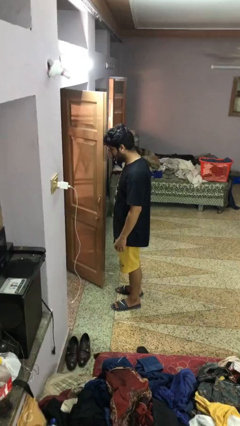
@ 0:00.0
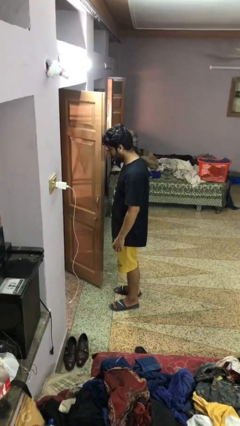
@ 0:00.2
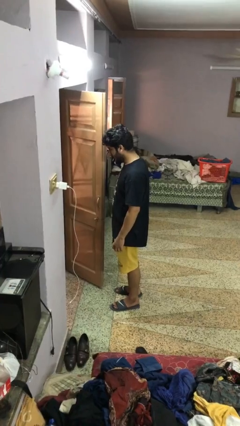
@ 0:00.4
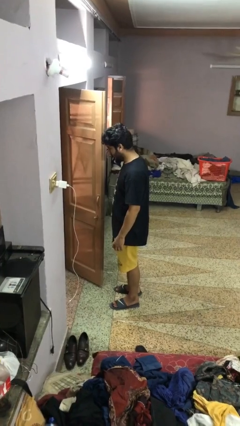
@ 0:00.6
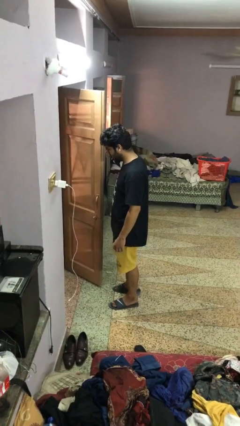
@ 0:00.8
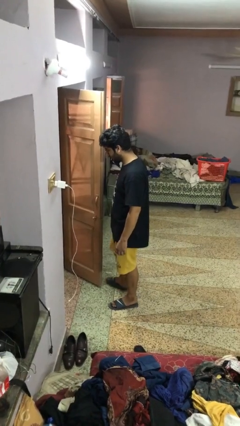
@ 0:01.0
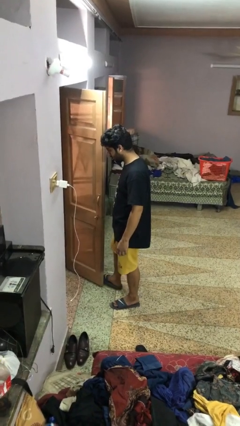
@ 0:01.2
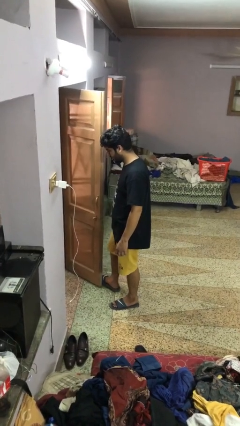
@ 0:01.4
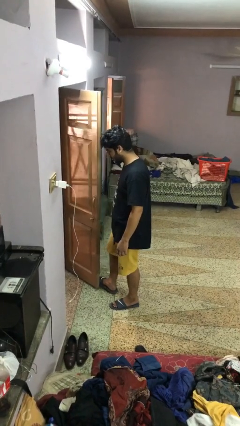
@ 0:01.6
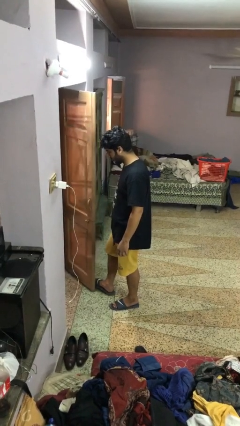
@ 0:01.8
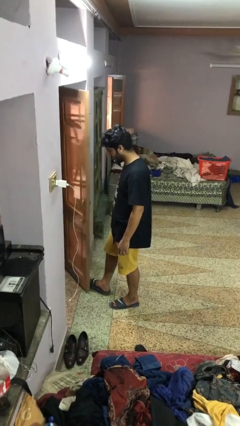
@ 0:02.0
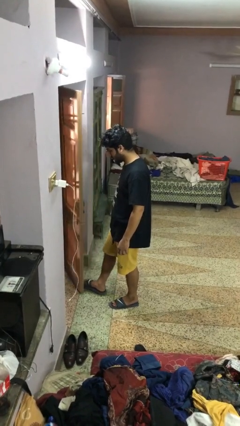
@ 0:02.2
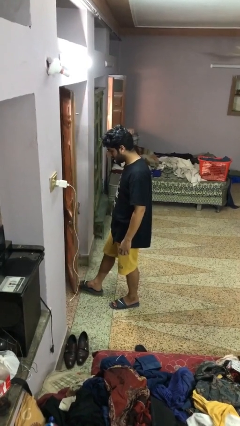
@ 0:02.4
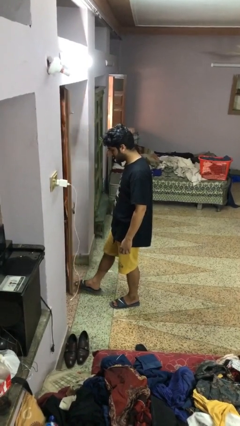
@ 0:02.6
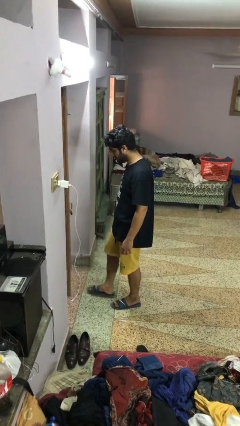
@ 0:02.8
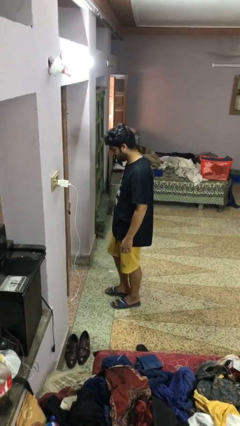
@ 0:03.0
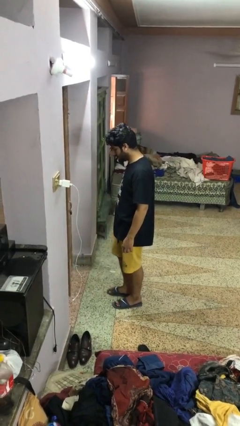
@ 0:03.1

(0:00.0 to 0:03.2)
person closes door with foot

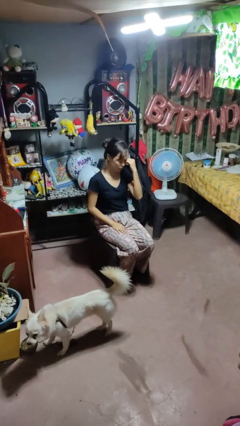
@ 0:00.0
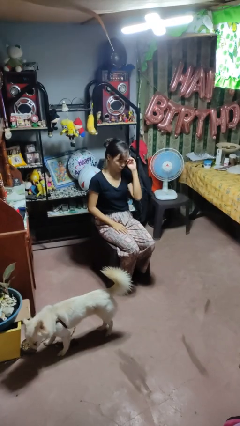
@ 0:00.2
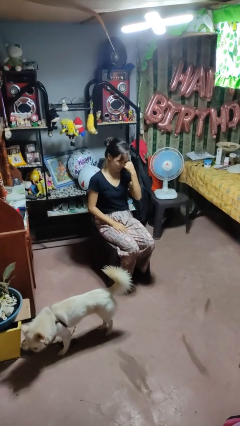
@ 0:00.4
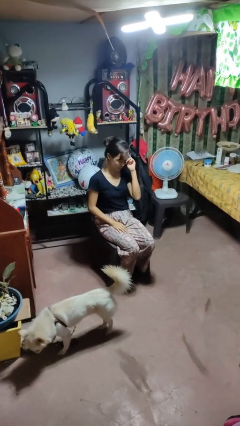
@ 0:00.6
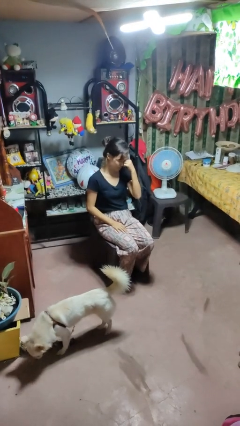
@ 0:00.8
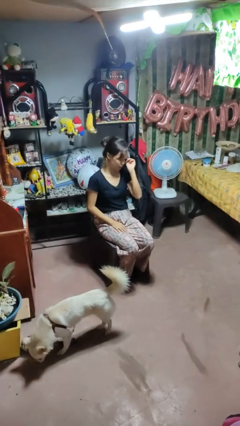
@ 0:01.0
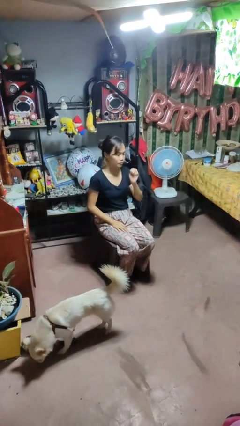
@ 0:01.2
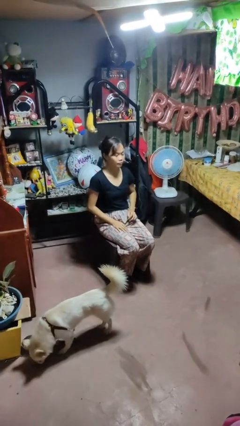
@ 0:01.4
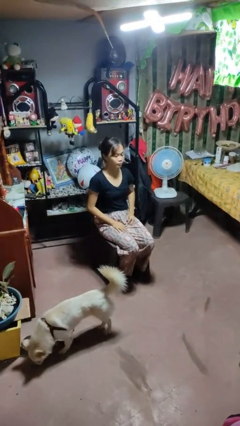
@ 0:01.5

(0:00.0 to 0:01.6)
person rubs eyes

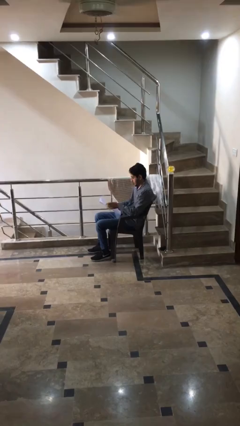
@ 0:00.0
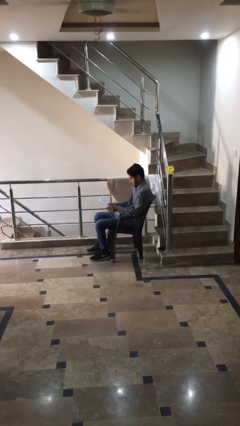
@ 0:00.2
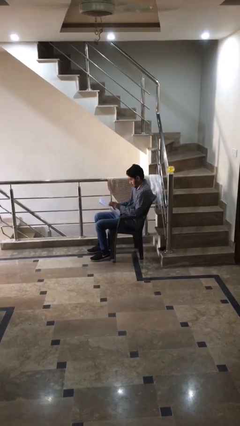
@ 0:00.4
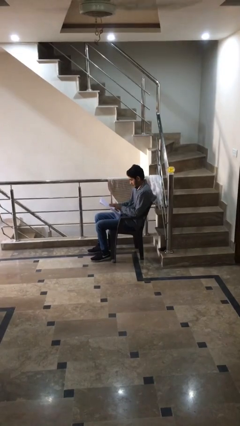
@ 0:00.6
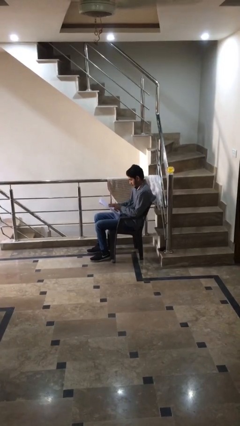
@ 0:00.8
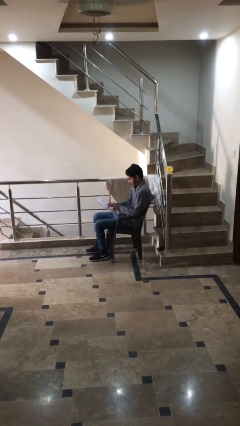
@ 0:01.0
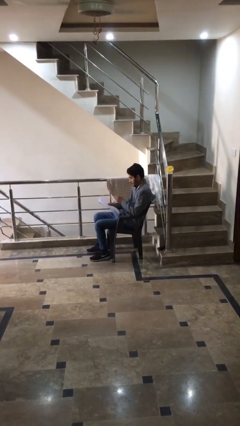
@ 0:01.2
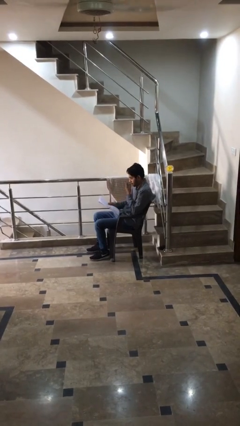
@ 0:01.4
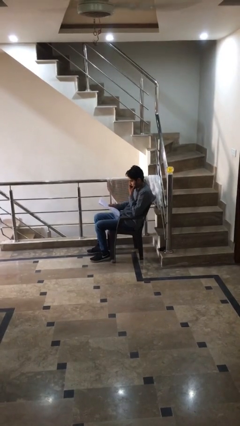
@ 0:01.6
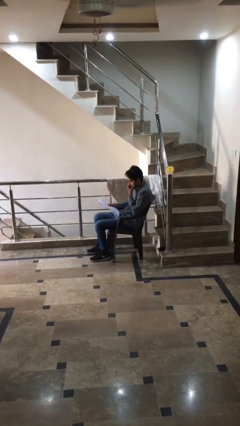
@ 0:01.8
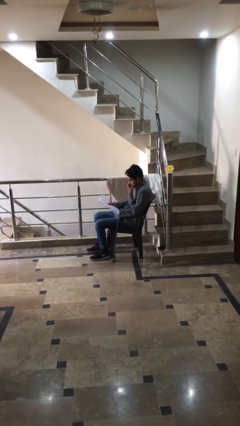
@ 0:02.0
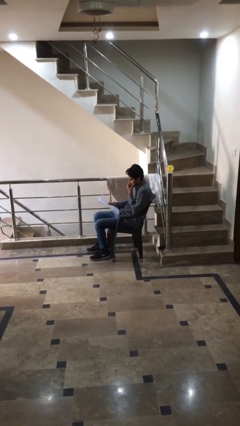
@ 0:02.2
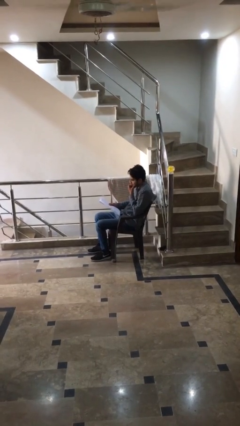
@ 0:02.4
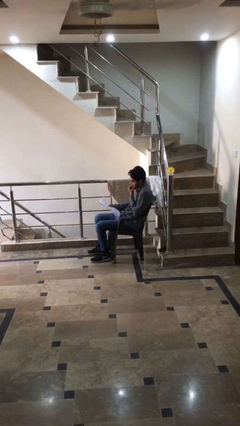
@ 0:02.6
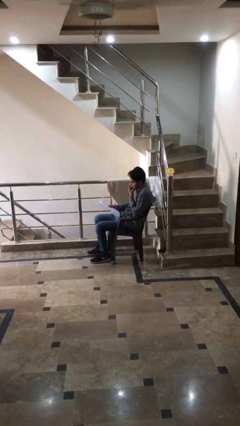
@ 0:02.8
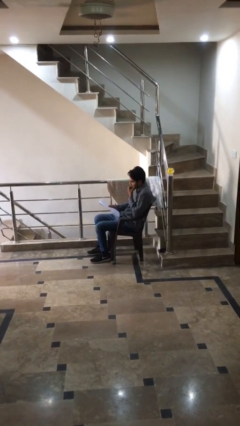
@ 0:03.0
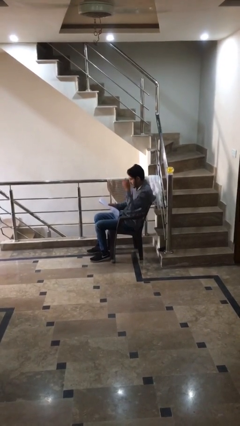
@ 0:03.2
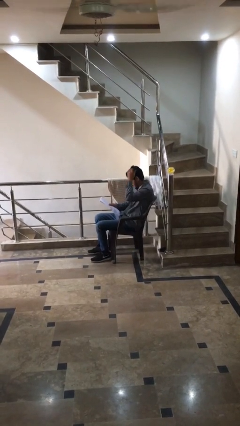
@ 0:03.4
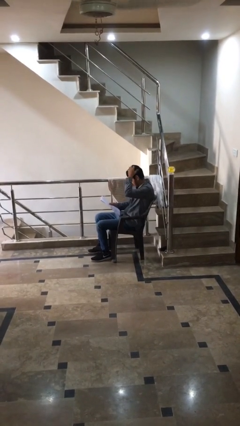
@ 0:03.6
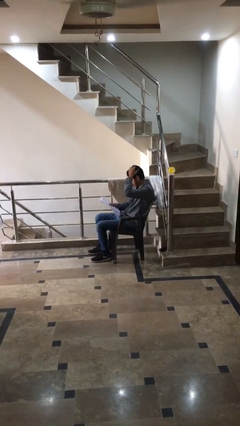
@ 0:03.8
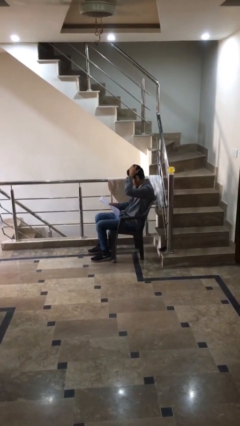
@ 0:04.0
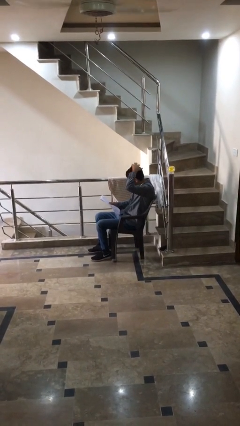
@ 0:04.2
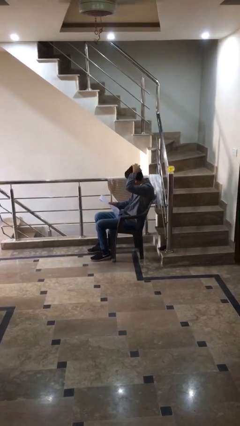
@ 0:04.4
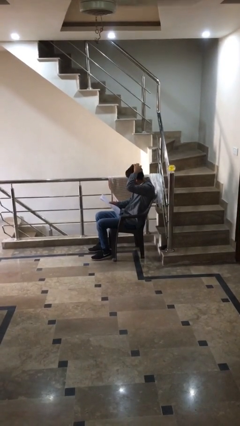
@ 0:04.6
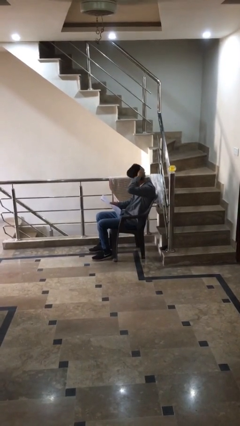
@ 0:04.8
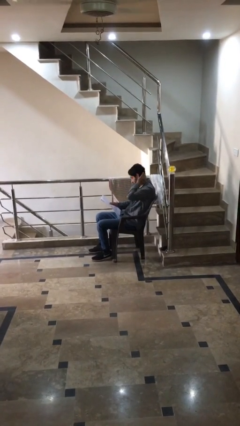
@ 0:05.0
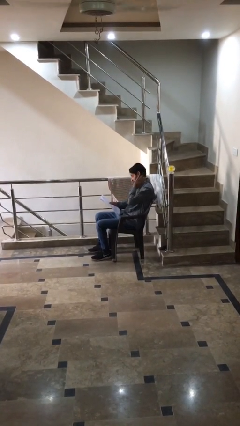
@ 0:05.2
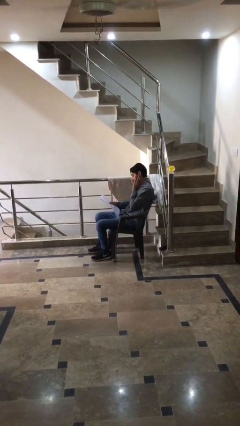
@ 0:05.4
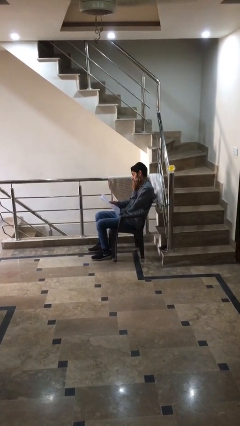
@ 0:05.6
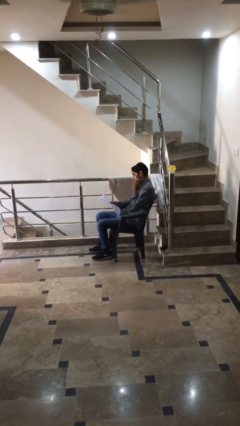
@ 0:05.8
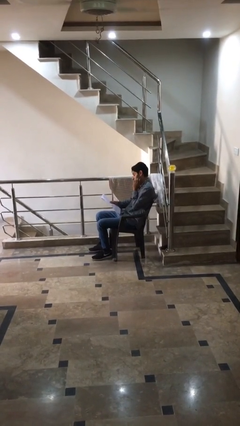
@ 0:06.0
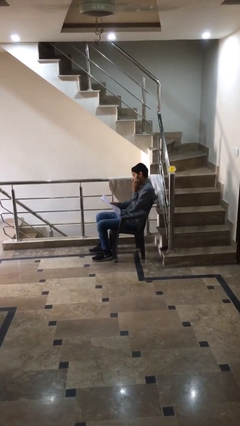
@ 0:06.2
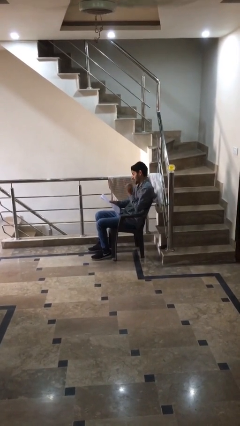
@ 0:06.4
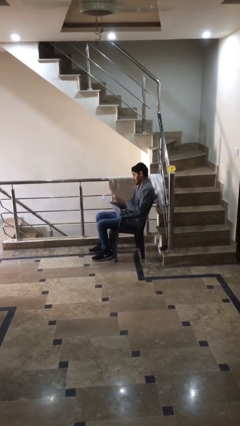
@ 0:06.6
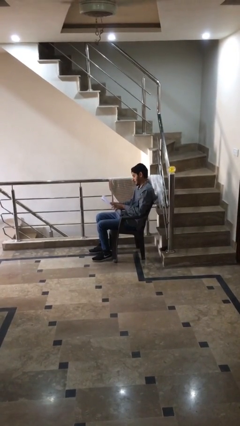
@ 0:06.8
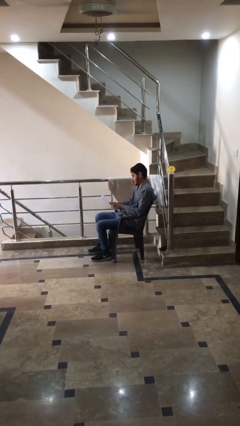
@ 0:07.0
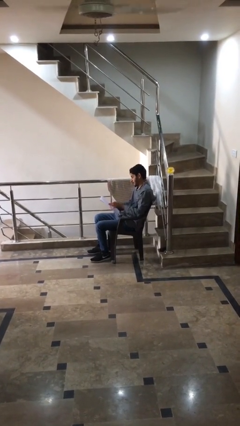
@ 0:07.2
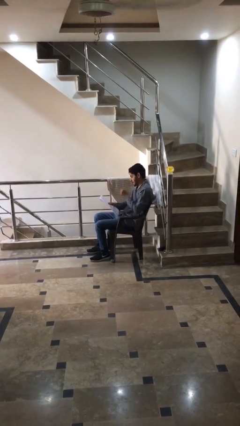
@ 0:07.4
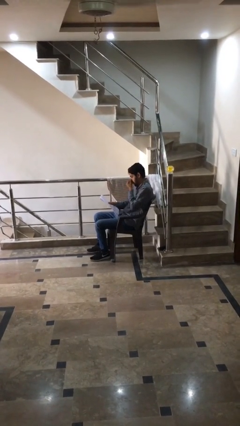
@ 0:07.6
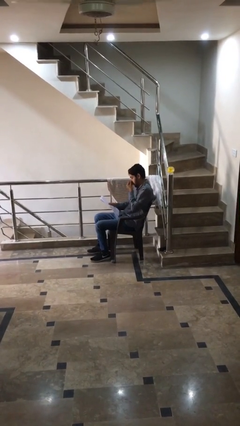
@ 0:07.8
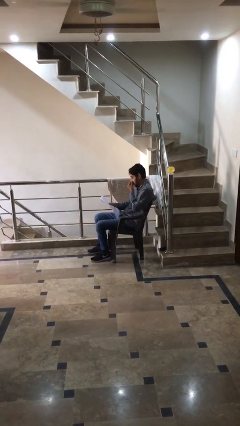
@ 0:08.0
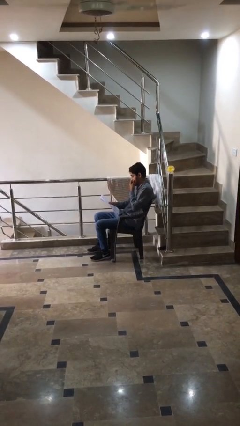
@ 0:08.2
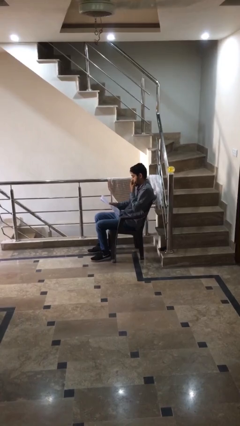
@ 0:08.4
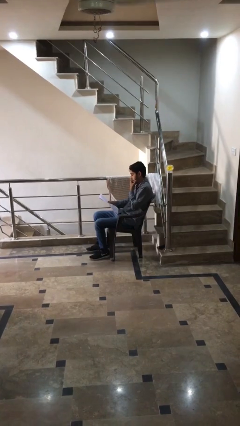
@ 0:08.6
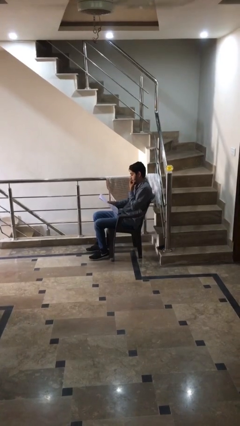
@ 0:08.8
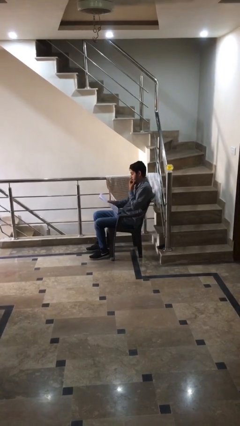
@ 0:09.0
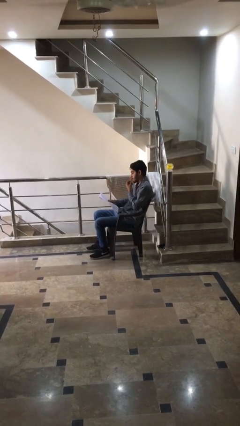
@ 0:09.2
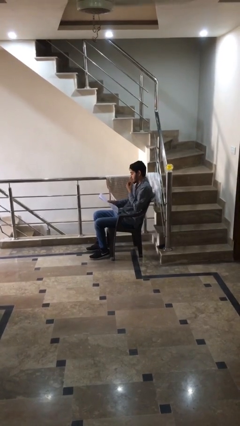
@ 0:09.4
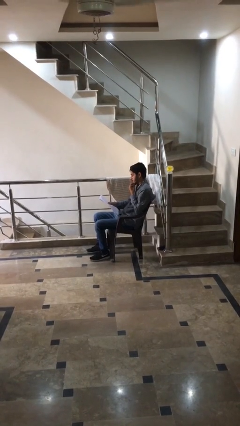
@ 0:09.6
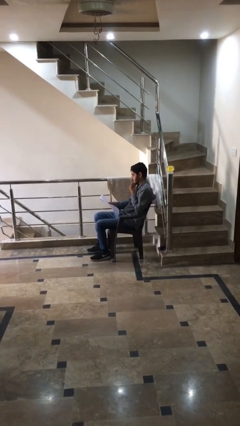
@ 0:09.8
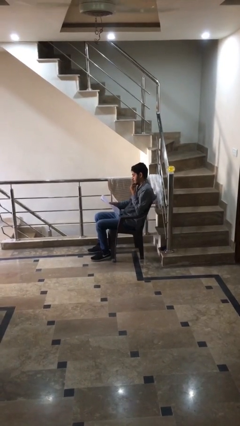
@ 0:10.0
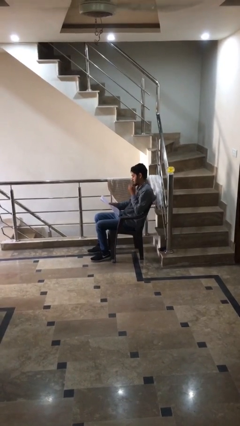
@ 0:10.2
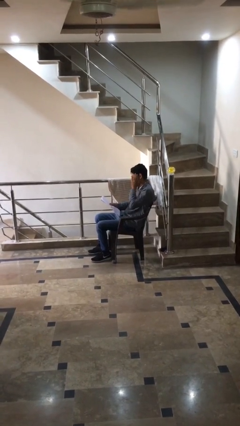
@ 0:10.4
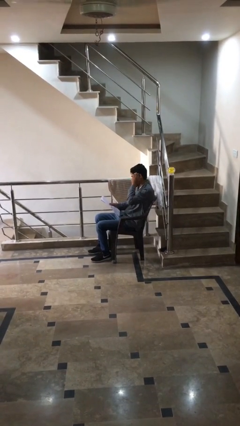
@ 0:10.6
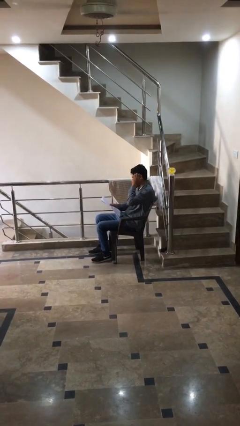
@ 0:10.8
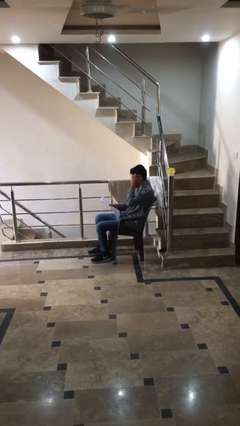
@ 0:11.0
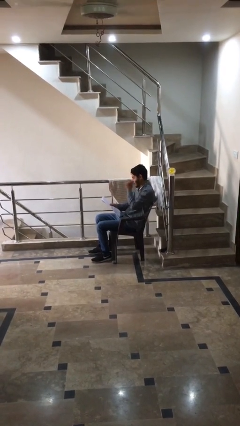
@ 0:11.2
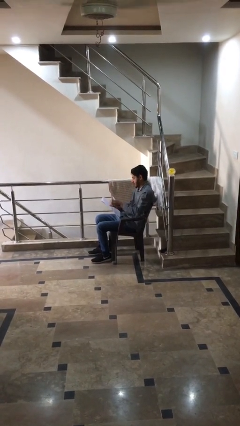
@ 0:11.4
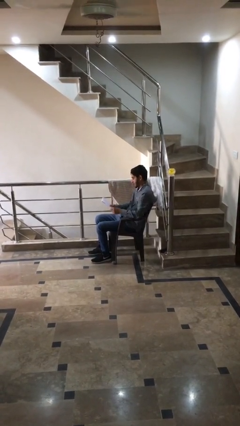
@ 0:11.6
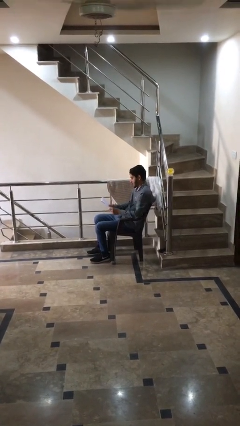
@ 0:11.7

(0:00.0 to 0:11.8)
person reads document

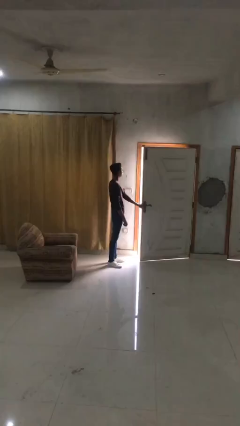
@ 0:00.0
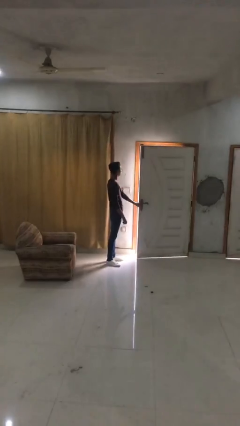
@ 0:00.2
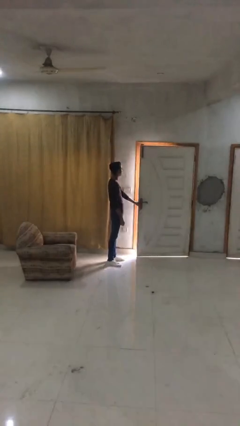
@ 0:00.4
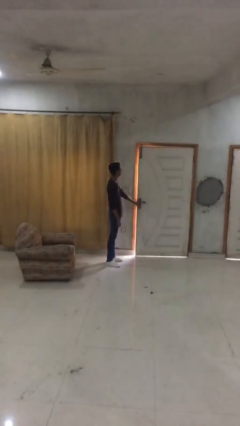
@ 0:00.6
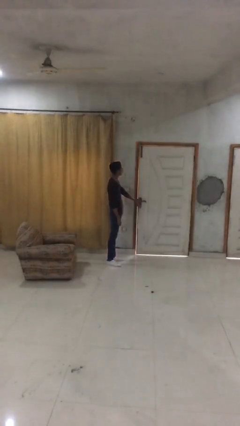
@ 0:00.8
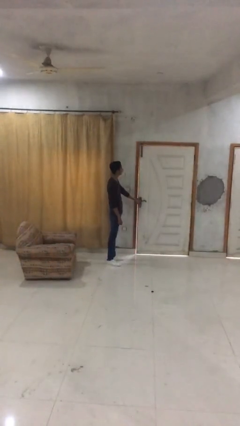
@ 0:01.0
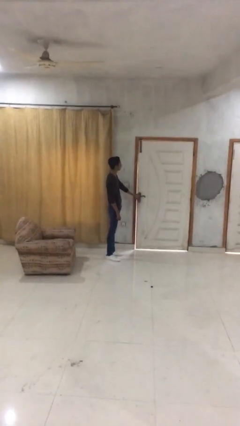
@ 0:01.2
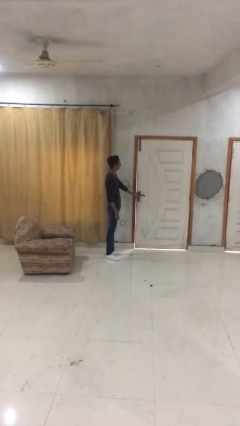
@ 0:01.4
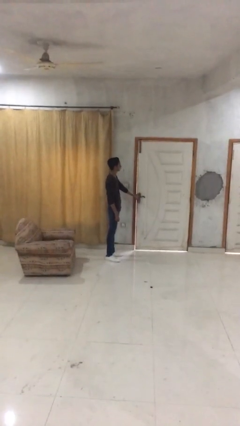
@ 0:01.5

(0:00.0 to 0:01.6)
person closes facility door
